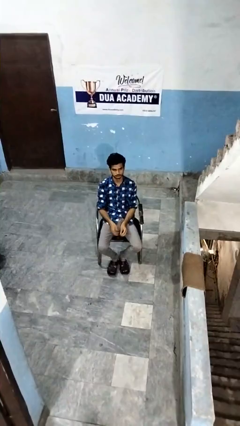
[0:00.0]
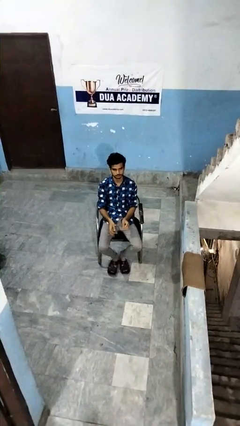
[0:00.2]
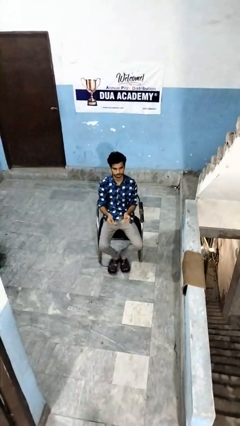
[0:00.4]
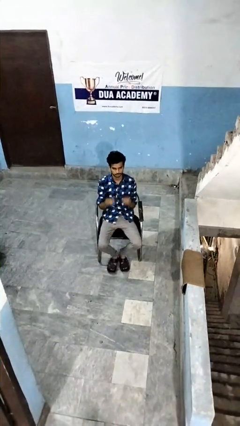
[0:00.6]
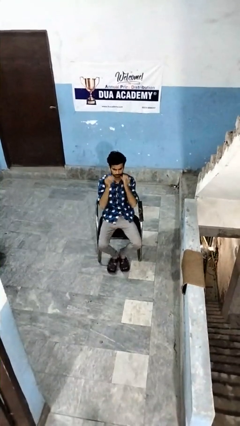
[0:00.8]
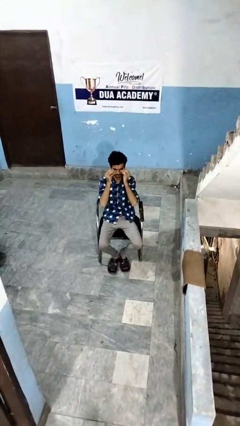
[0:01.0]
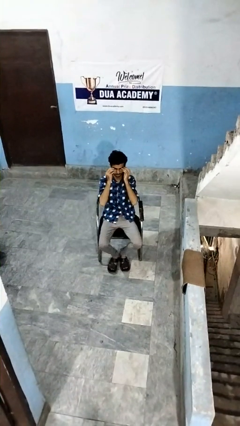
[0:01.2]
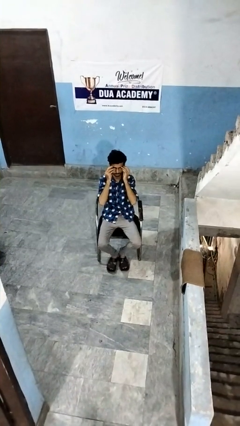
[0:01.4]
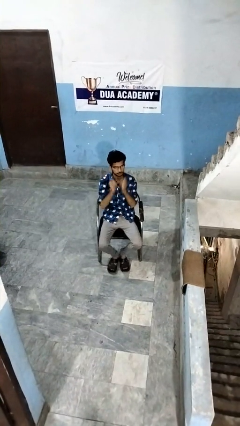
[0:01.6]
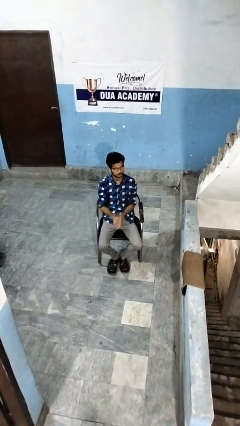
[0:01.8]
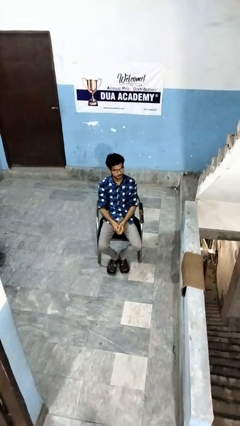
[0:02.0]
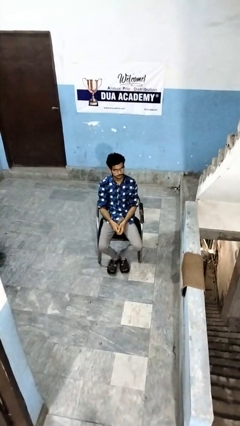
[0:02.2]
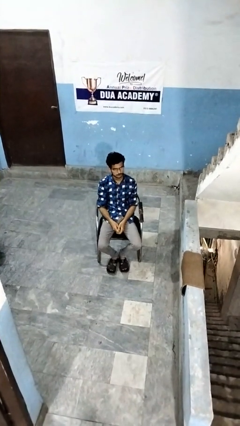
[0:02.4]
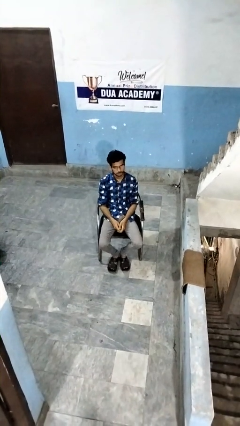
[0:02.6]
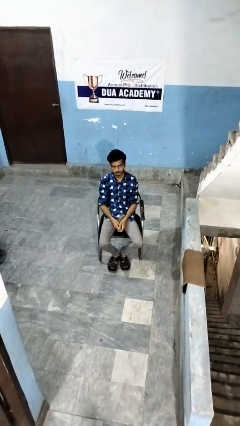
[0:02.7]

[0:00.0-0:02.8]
person puts on glasses

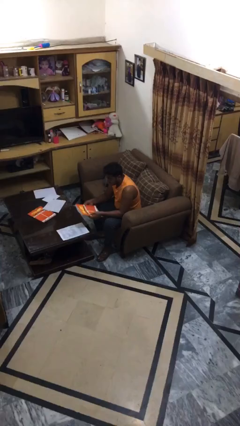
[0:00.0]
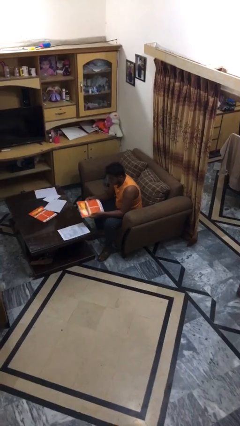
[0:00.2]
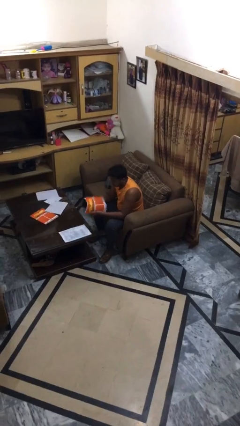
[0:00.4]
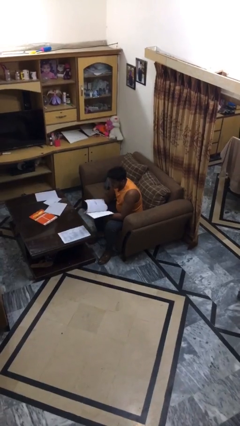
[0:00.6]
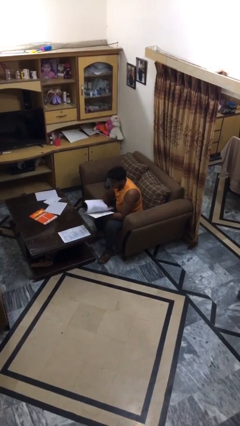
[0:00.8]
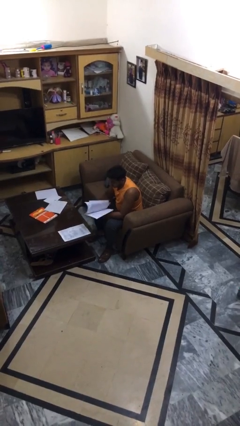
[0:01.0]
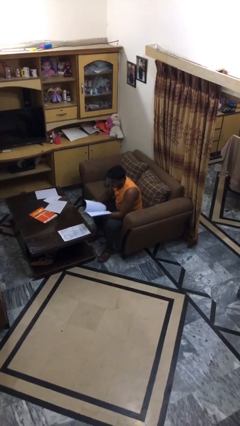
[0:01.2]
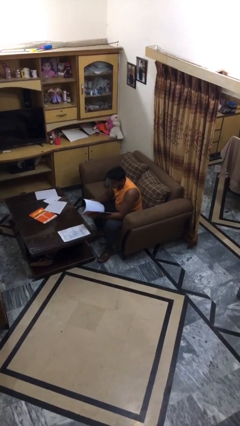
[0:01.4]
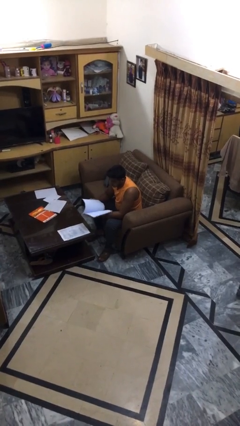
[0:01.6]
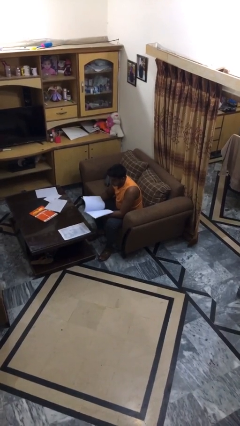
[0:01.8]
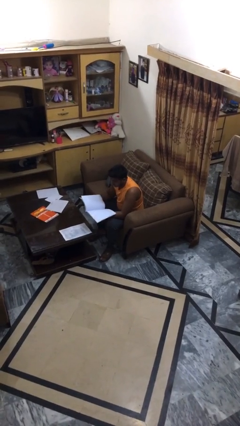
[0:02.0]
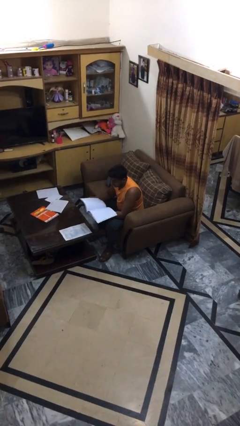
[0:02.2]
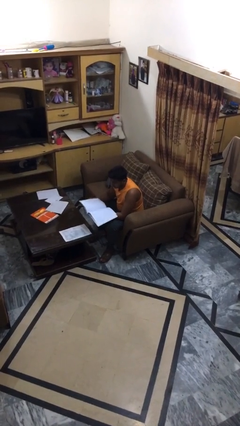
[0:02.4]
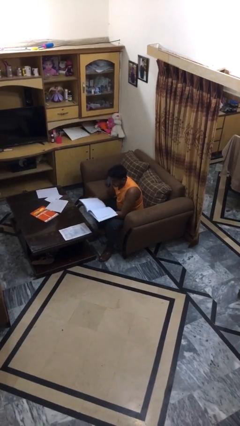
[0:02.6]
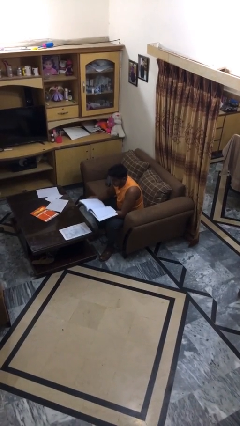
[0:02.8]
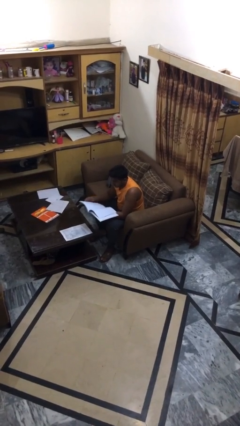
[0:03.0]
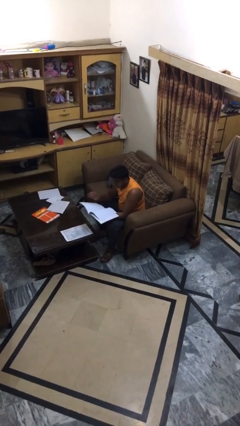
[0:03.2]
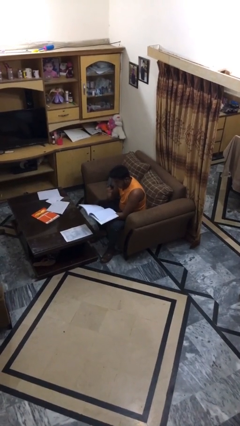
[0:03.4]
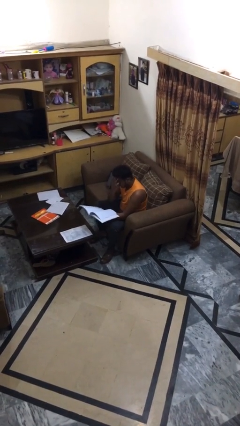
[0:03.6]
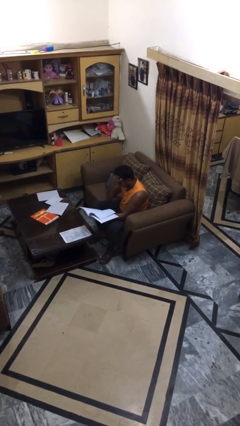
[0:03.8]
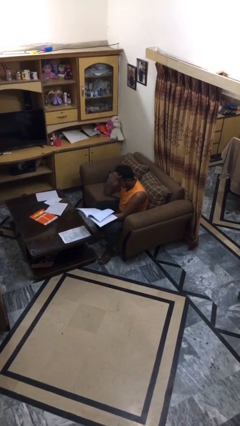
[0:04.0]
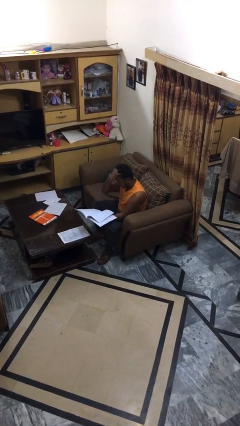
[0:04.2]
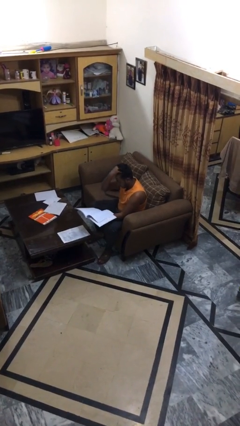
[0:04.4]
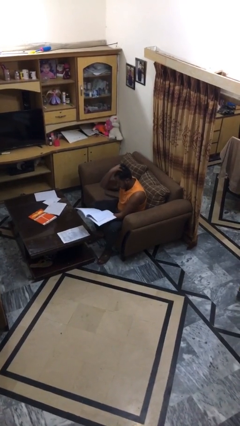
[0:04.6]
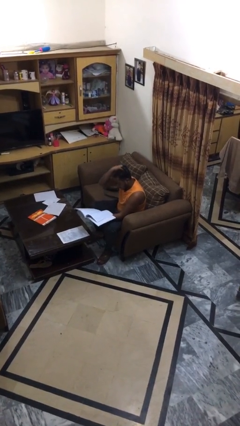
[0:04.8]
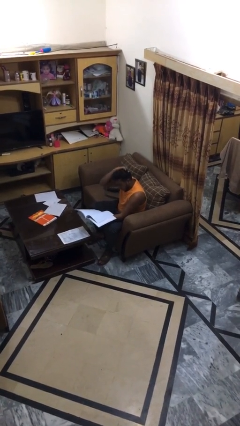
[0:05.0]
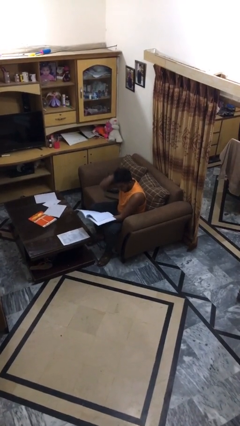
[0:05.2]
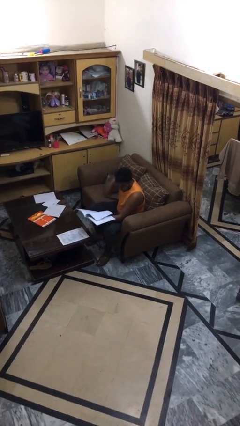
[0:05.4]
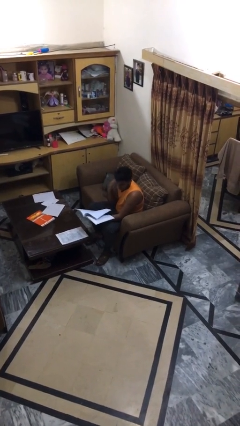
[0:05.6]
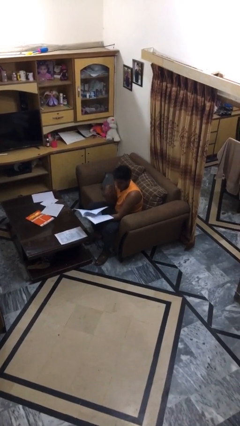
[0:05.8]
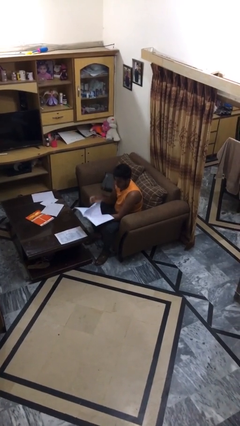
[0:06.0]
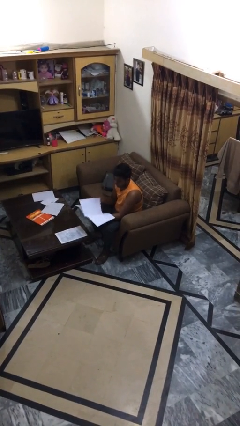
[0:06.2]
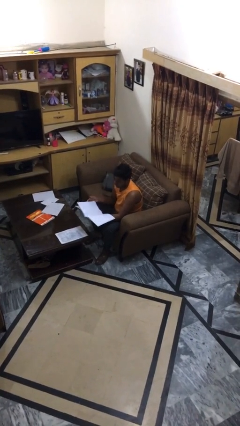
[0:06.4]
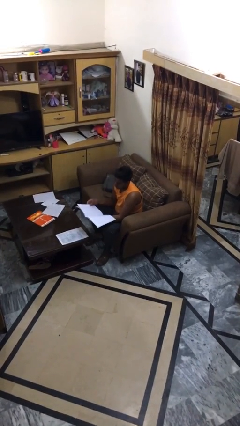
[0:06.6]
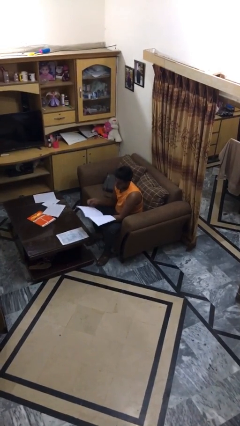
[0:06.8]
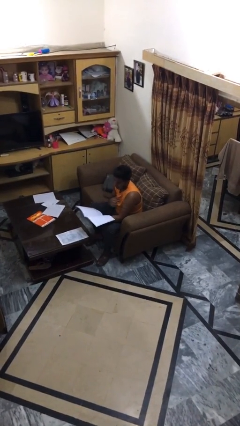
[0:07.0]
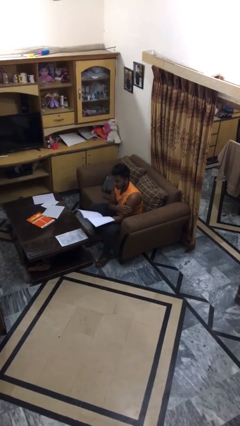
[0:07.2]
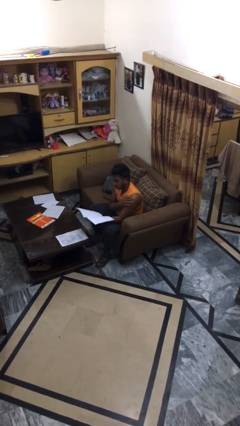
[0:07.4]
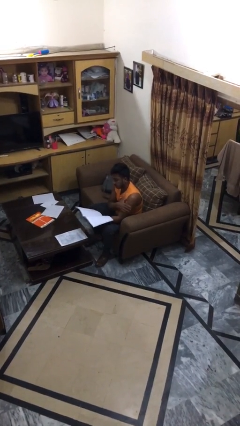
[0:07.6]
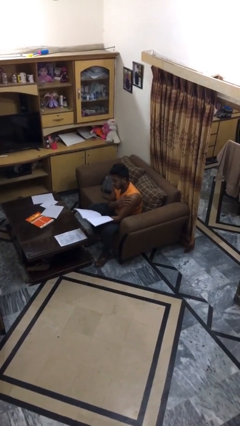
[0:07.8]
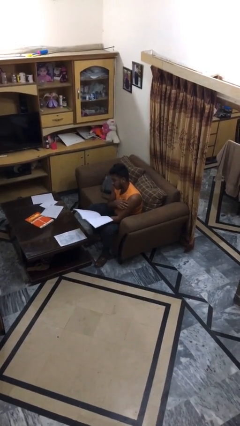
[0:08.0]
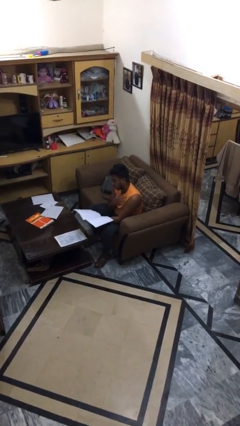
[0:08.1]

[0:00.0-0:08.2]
person reads document

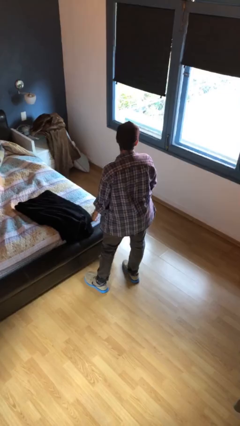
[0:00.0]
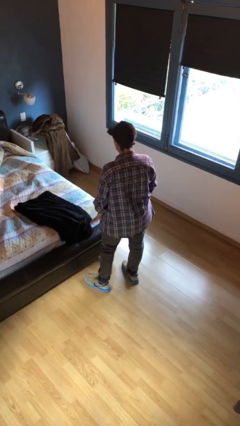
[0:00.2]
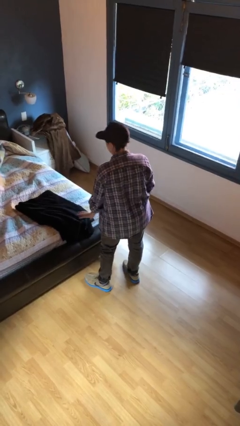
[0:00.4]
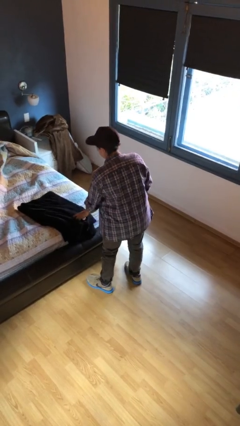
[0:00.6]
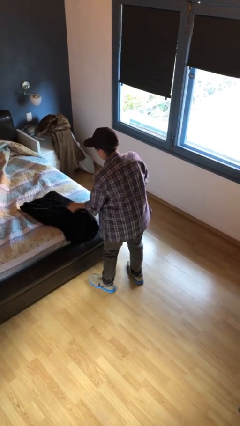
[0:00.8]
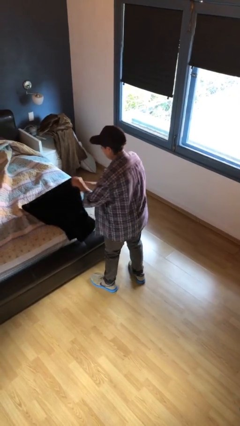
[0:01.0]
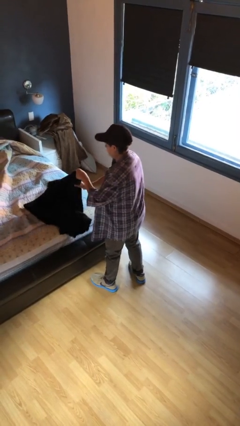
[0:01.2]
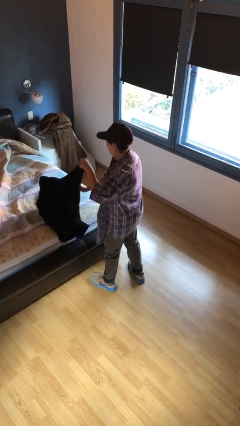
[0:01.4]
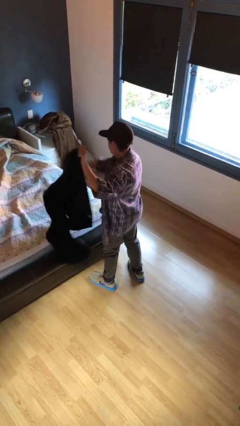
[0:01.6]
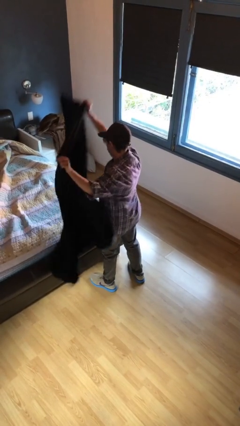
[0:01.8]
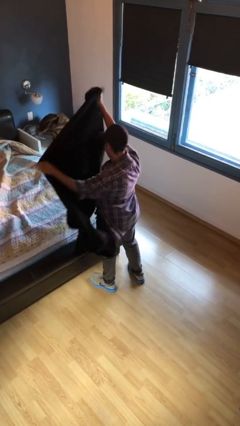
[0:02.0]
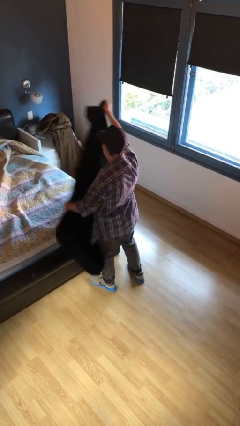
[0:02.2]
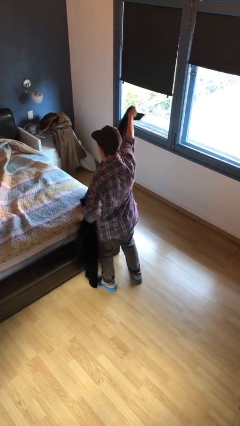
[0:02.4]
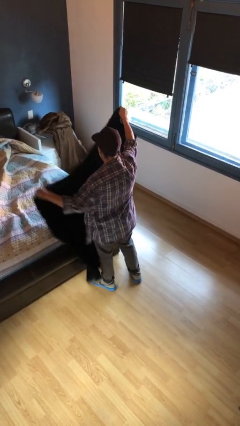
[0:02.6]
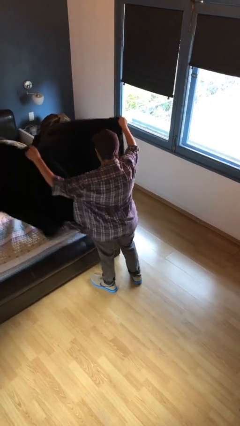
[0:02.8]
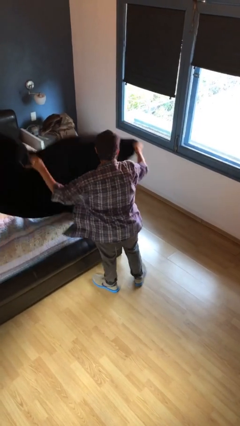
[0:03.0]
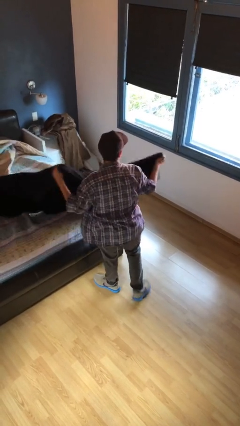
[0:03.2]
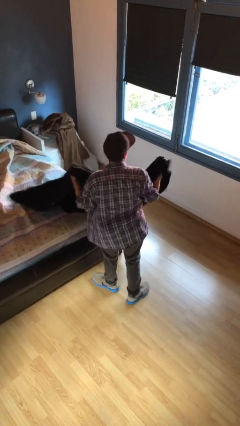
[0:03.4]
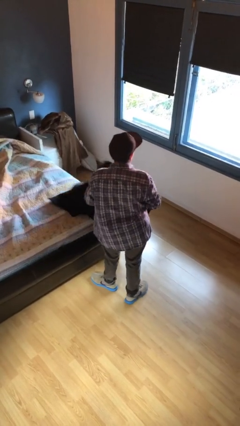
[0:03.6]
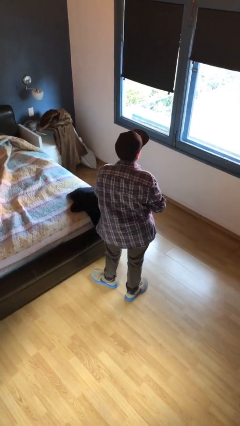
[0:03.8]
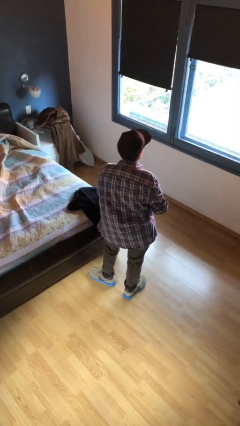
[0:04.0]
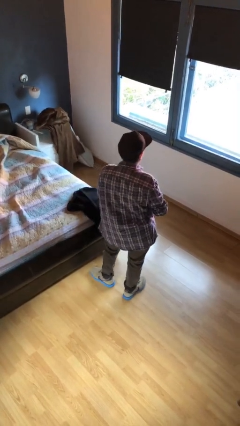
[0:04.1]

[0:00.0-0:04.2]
person unfolds blanket

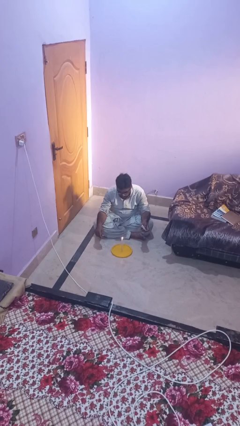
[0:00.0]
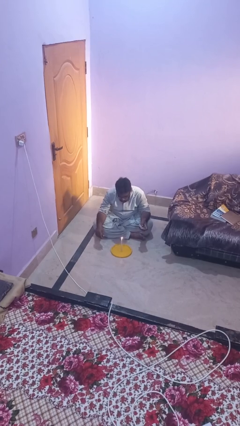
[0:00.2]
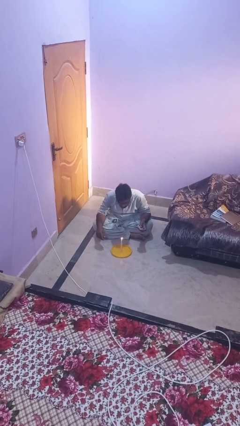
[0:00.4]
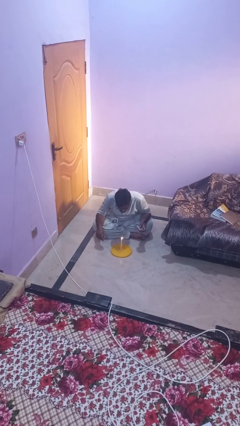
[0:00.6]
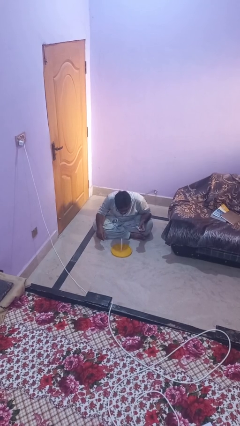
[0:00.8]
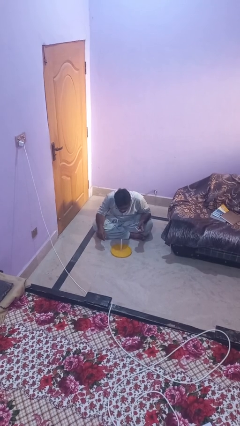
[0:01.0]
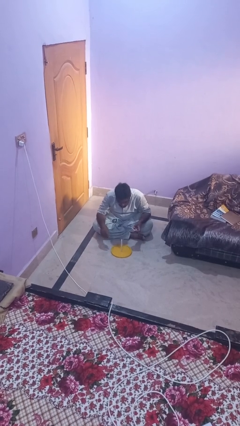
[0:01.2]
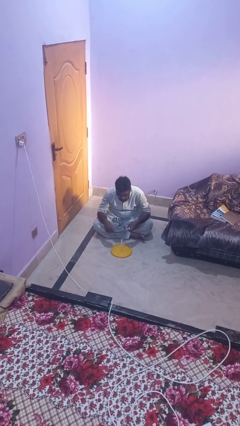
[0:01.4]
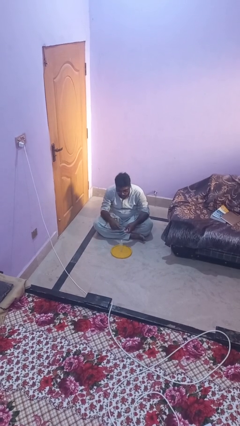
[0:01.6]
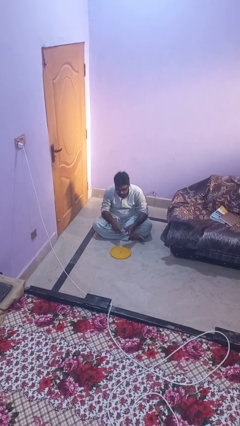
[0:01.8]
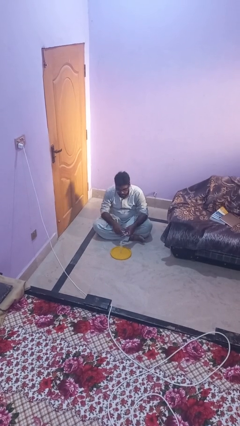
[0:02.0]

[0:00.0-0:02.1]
person extinguishes candle

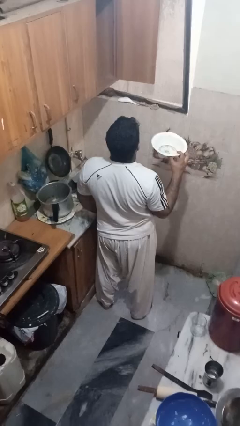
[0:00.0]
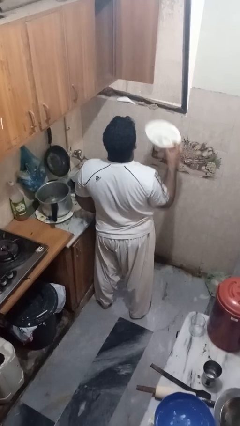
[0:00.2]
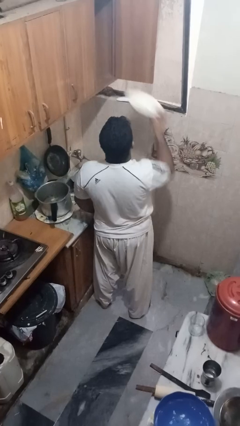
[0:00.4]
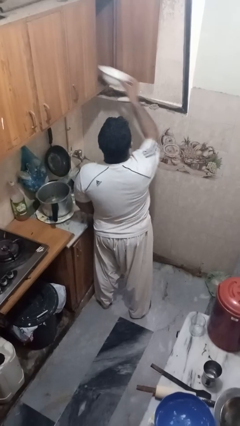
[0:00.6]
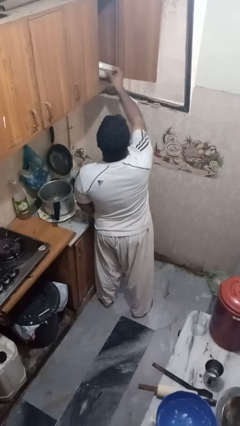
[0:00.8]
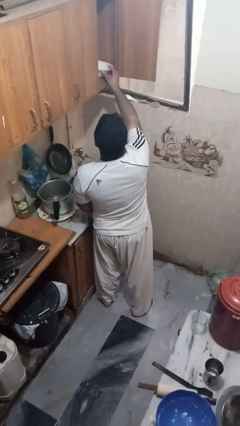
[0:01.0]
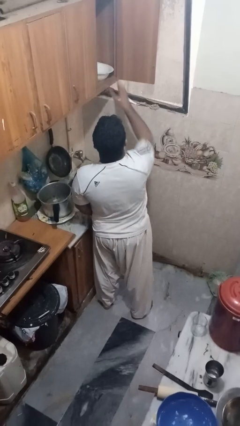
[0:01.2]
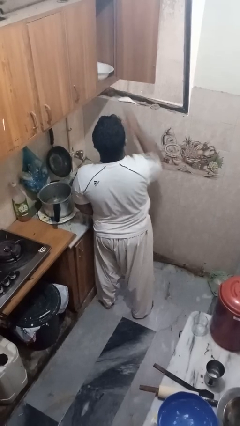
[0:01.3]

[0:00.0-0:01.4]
person puts object in cabinet
